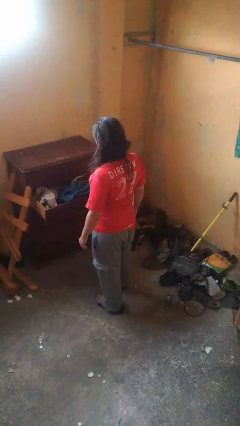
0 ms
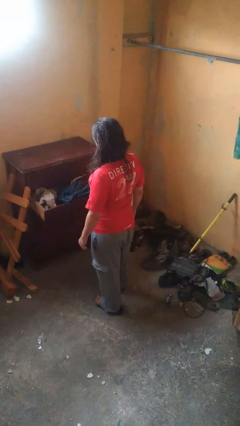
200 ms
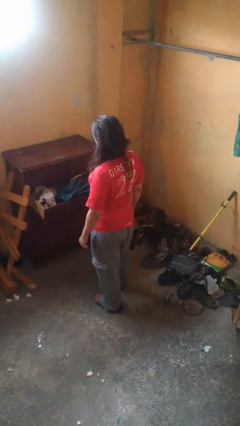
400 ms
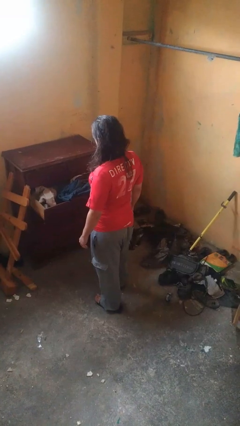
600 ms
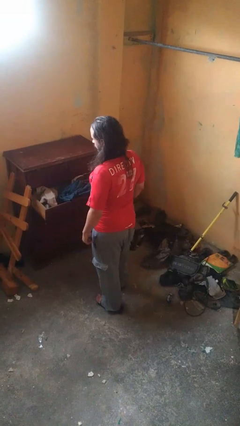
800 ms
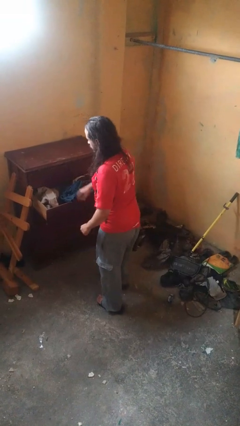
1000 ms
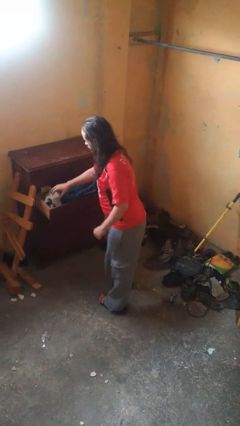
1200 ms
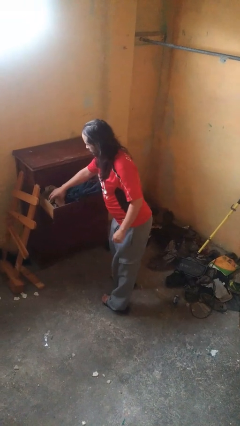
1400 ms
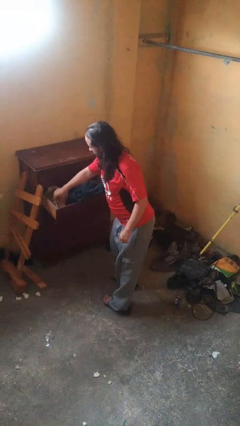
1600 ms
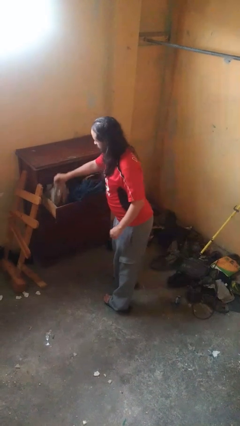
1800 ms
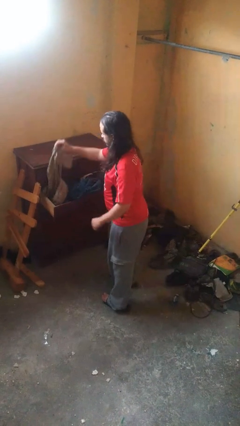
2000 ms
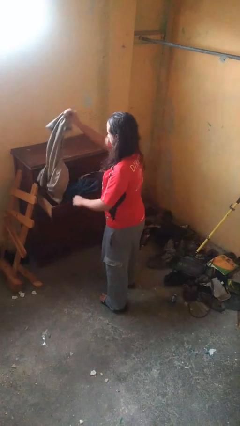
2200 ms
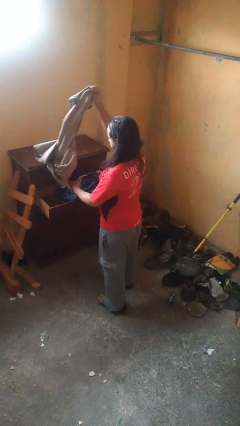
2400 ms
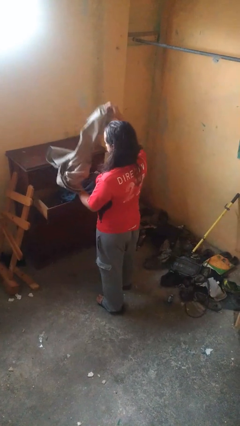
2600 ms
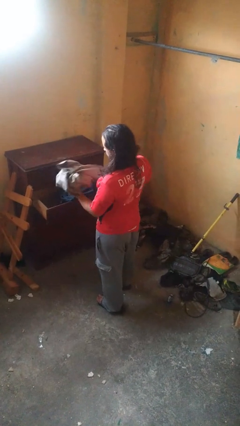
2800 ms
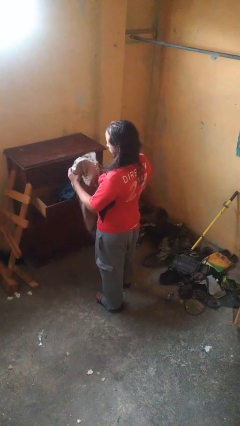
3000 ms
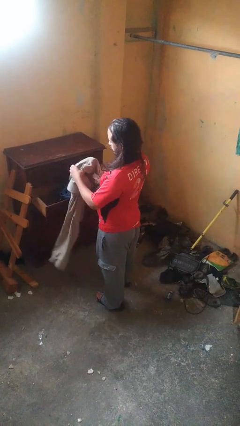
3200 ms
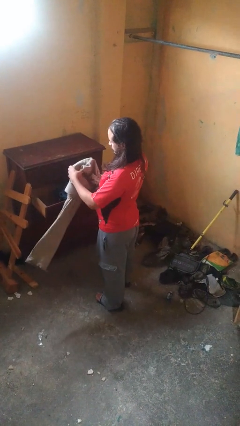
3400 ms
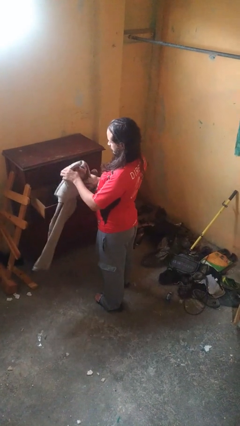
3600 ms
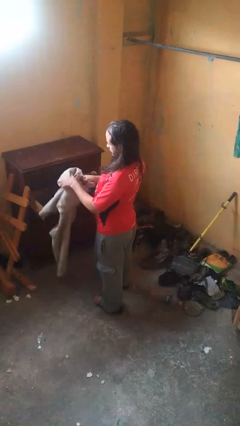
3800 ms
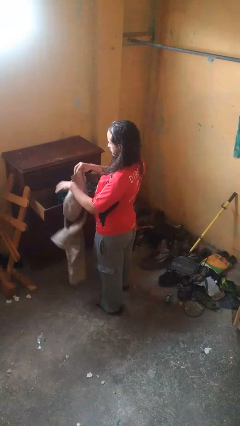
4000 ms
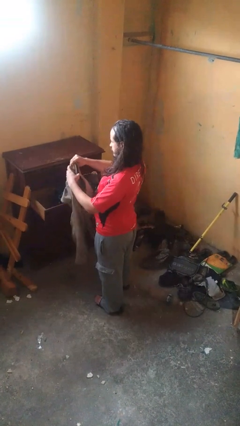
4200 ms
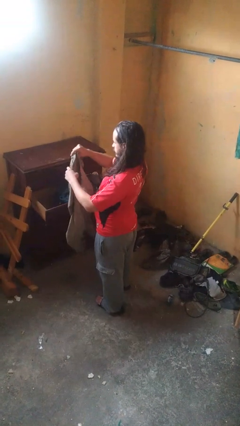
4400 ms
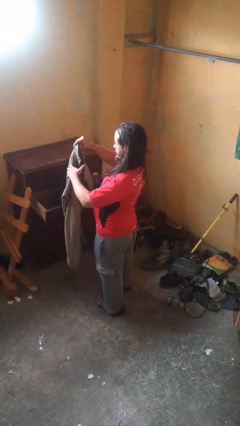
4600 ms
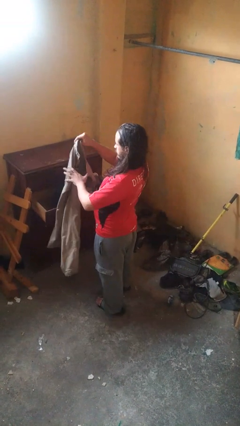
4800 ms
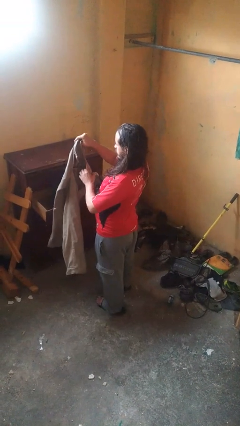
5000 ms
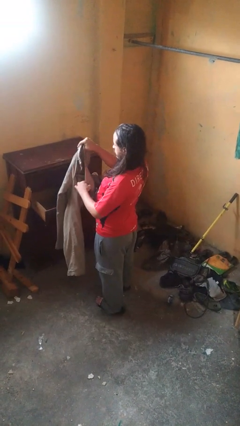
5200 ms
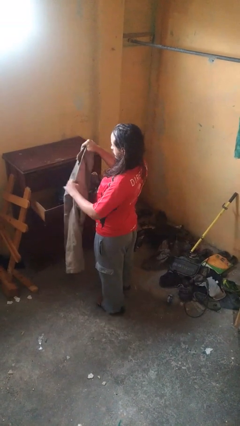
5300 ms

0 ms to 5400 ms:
person takes clothes from dresser

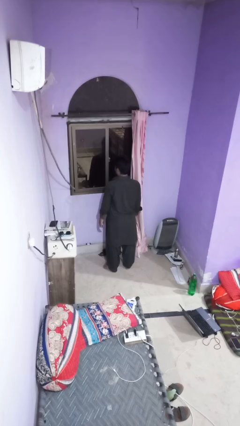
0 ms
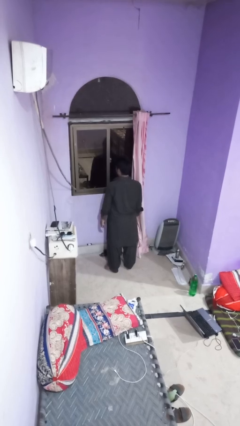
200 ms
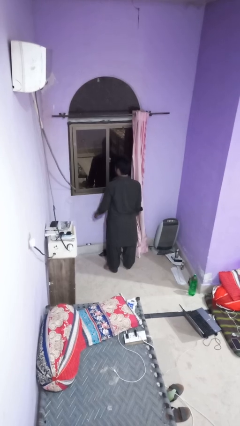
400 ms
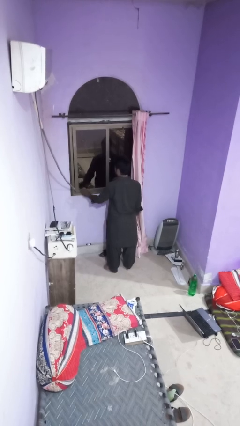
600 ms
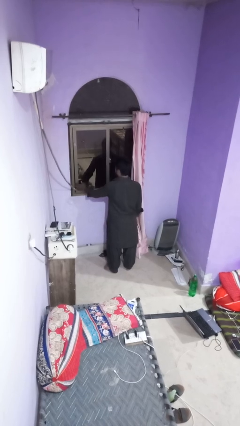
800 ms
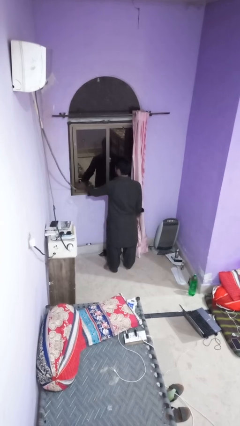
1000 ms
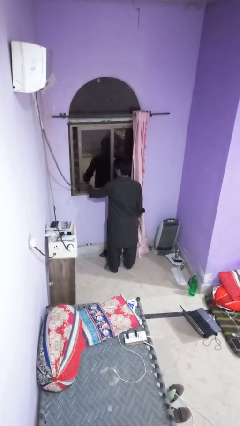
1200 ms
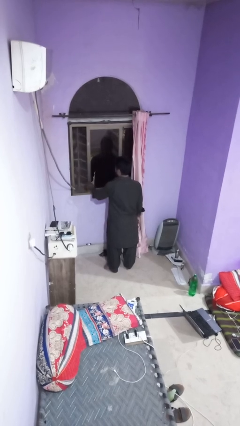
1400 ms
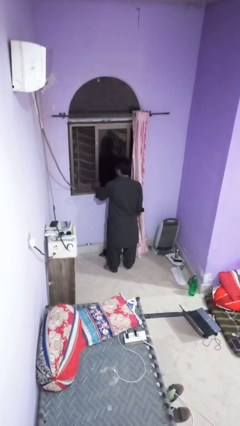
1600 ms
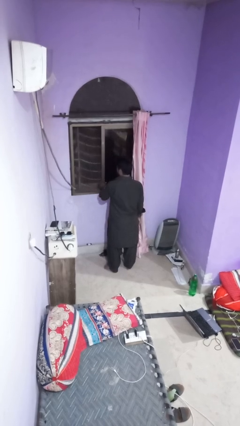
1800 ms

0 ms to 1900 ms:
person opens home window

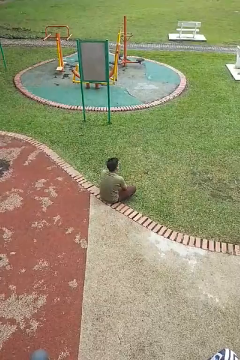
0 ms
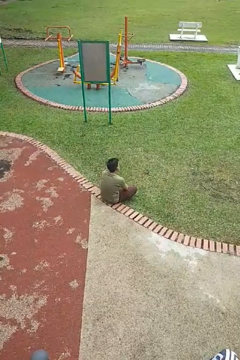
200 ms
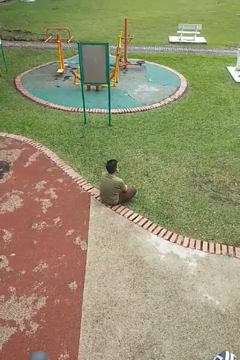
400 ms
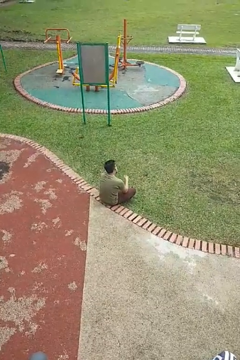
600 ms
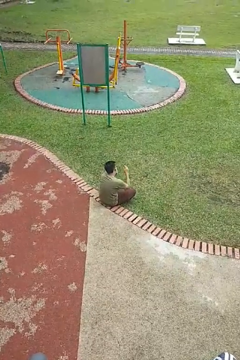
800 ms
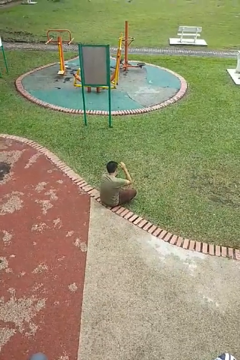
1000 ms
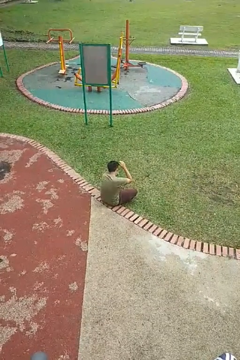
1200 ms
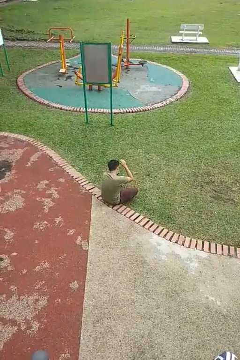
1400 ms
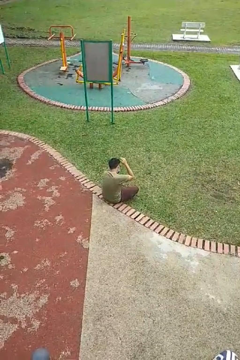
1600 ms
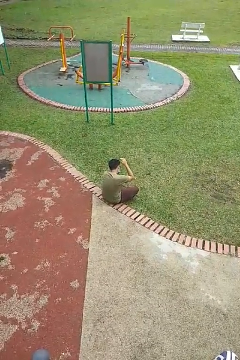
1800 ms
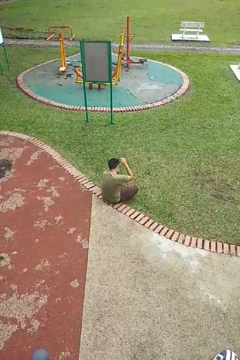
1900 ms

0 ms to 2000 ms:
person shades eyes

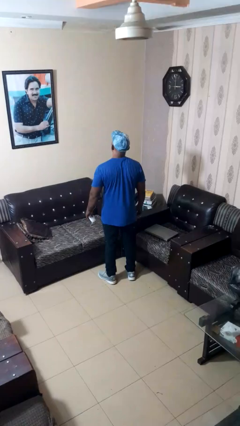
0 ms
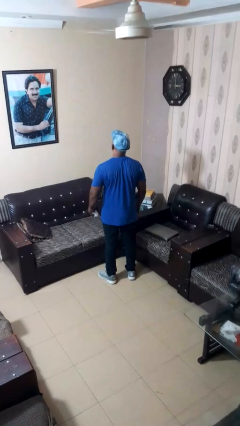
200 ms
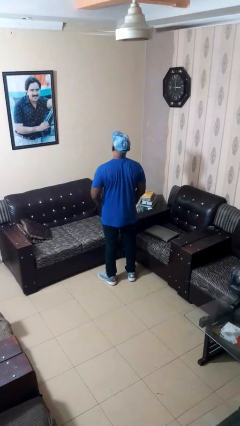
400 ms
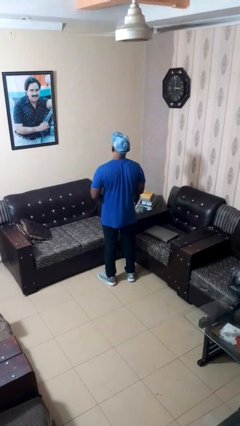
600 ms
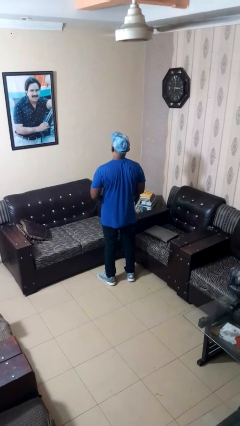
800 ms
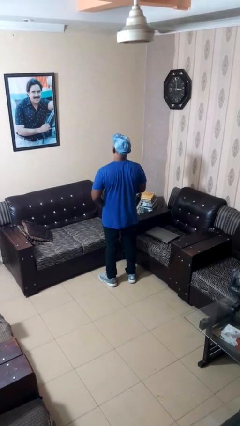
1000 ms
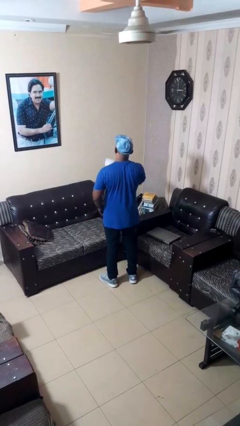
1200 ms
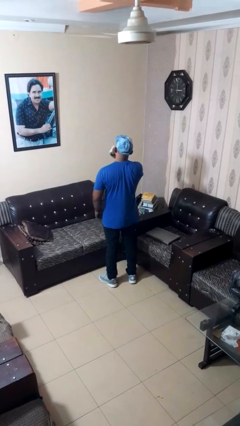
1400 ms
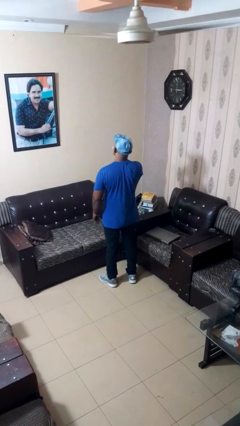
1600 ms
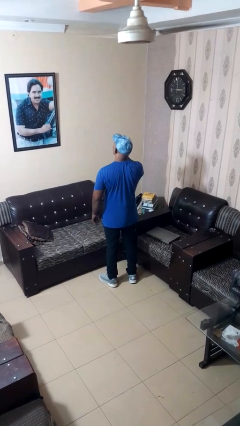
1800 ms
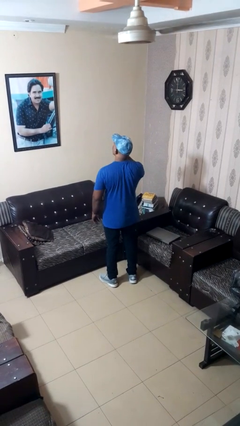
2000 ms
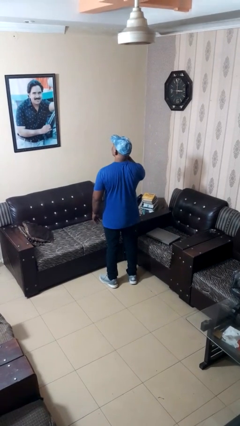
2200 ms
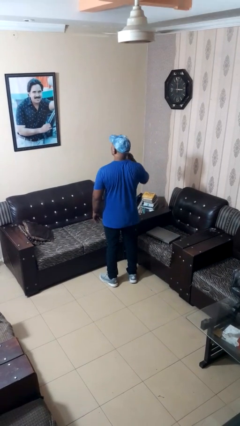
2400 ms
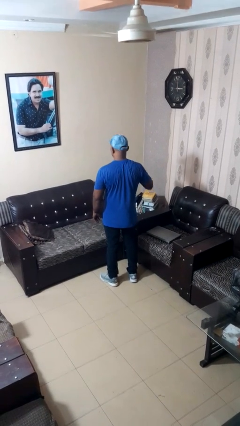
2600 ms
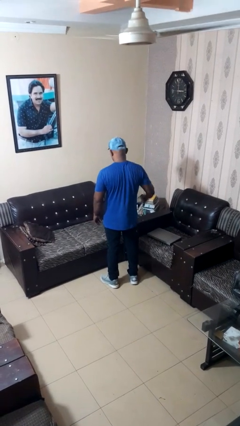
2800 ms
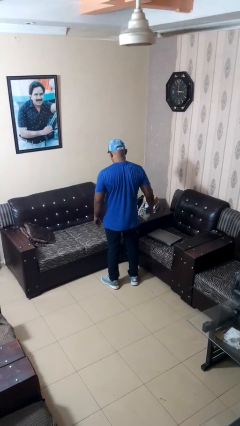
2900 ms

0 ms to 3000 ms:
person wipes mouth with napkin

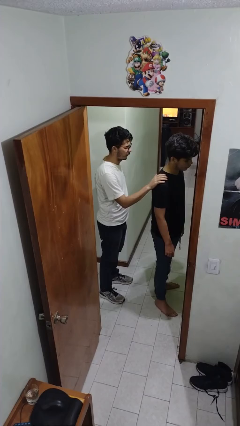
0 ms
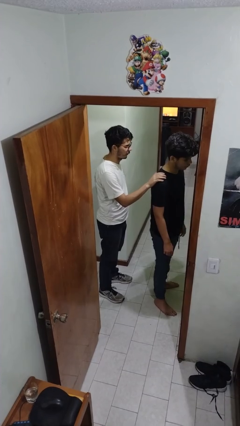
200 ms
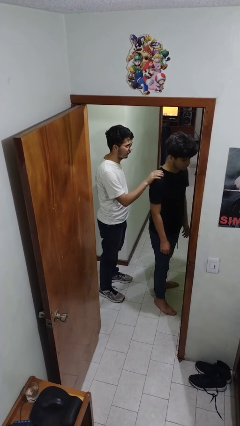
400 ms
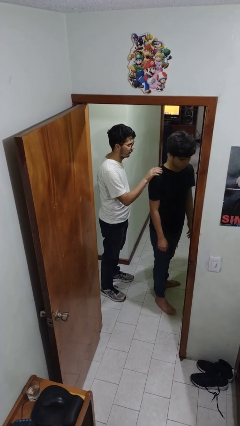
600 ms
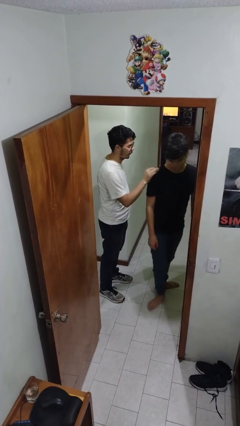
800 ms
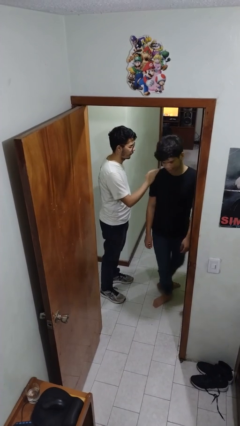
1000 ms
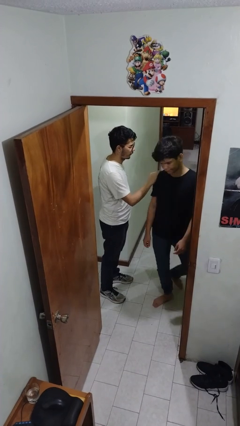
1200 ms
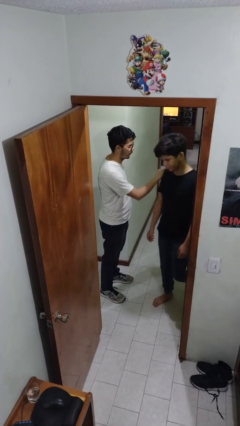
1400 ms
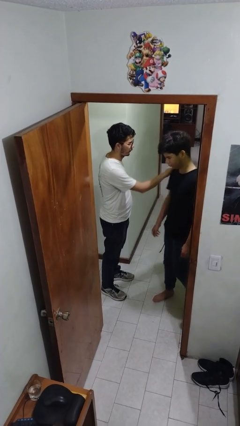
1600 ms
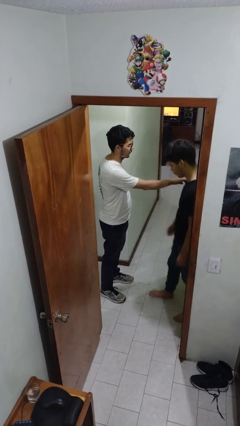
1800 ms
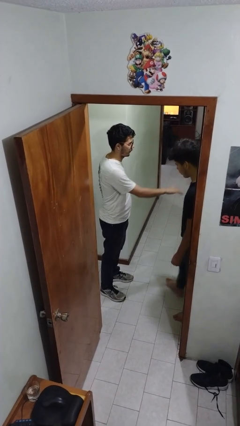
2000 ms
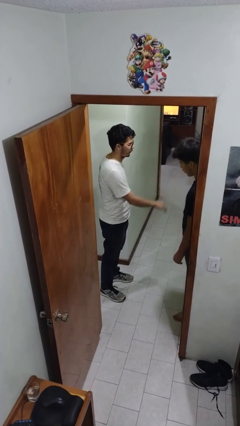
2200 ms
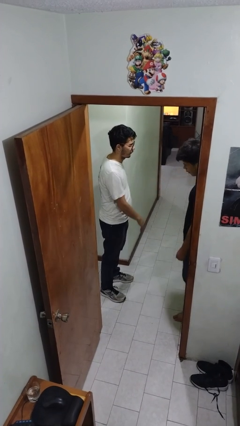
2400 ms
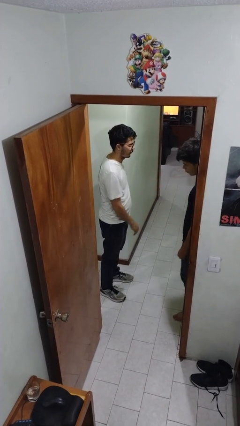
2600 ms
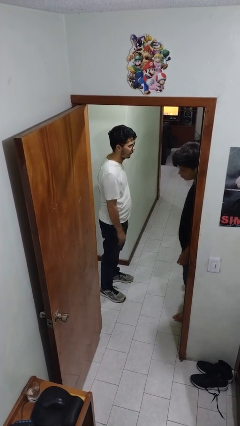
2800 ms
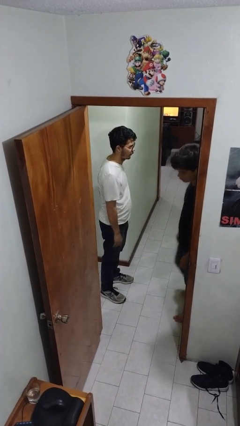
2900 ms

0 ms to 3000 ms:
person spins person around

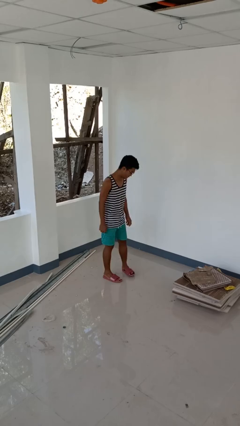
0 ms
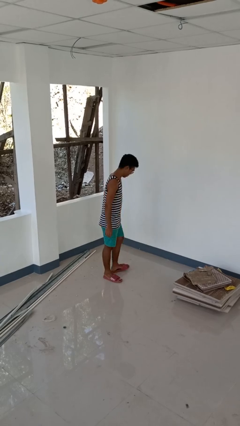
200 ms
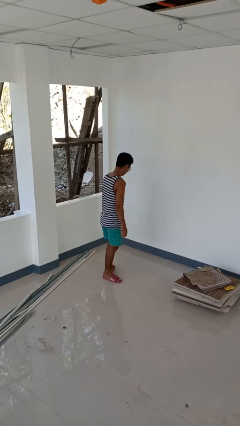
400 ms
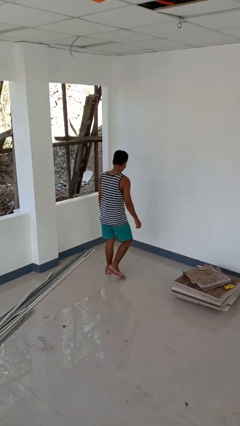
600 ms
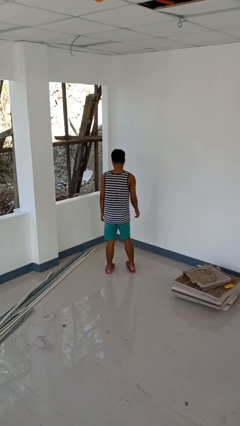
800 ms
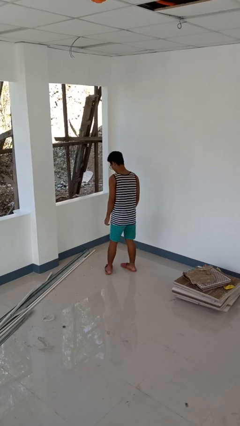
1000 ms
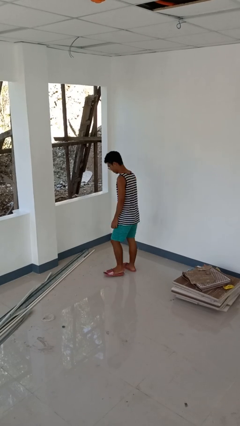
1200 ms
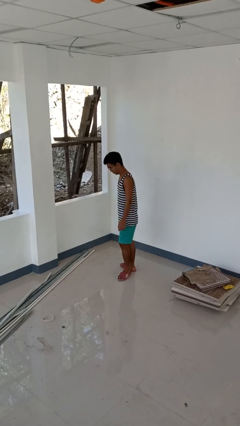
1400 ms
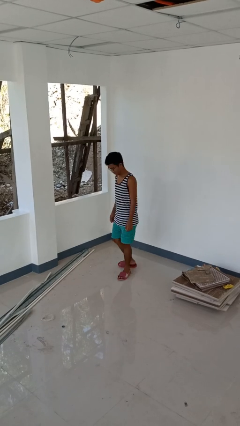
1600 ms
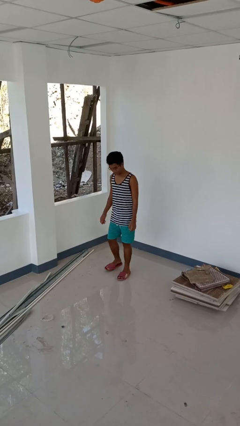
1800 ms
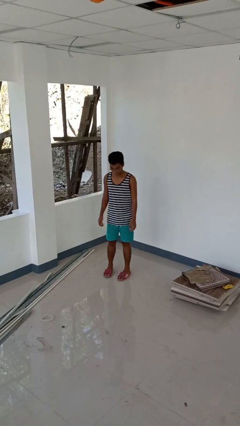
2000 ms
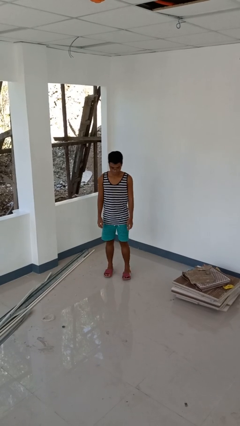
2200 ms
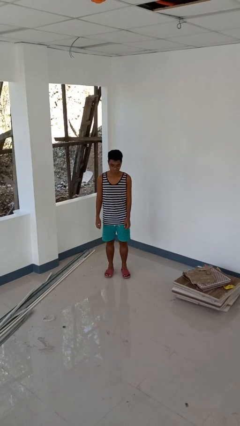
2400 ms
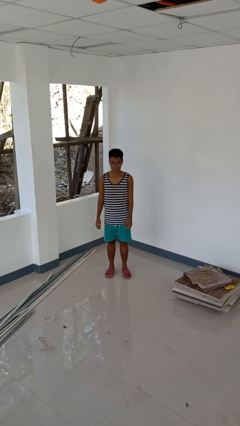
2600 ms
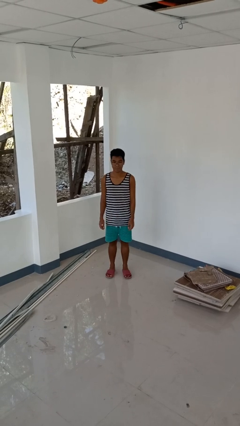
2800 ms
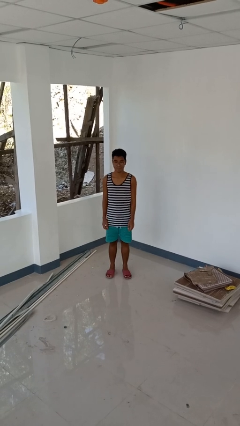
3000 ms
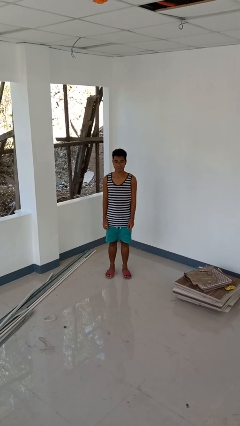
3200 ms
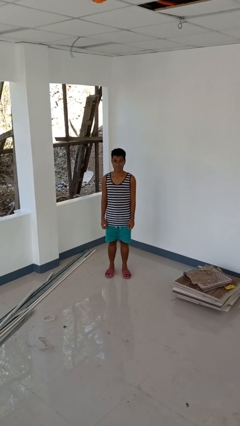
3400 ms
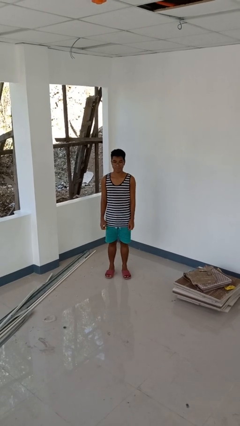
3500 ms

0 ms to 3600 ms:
person twirls
